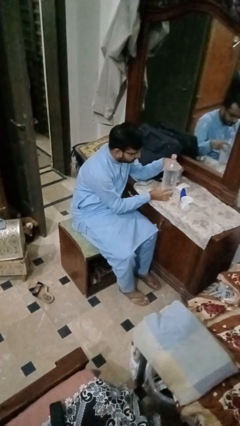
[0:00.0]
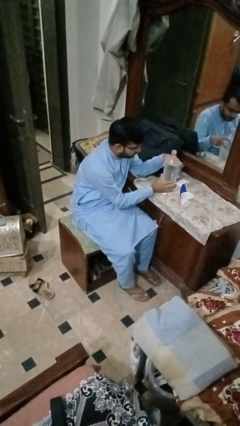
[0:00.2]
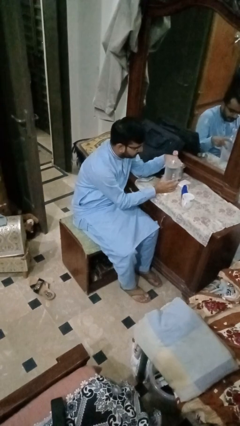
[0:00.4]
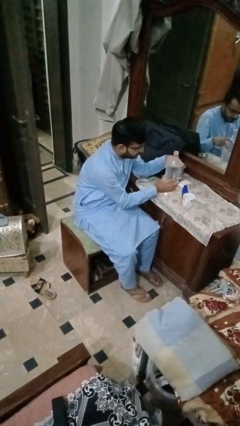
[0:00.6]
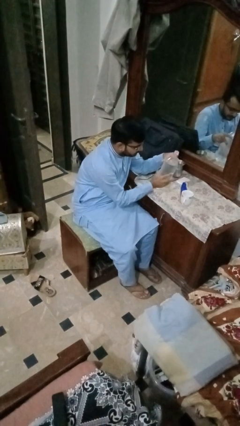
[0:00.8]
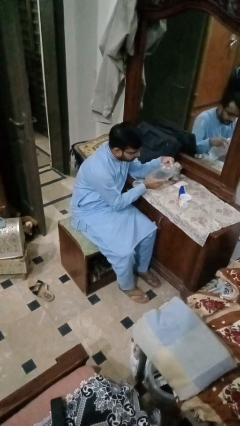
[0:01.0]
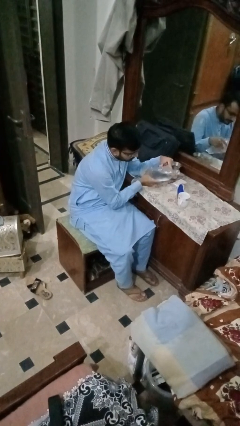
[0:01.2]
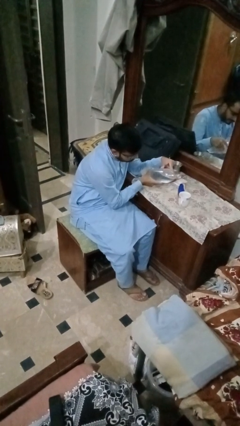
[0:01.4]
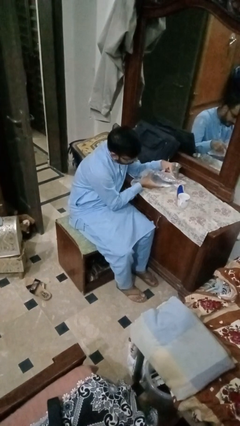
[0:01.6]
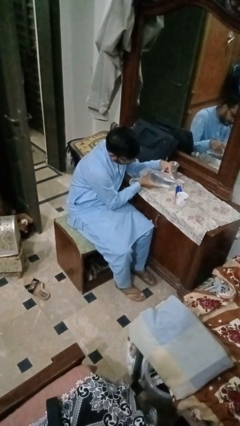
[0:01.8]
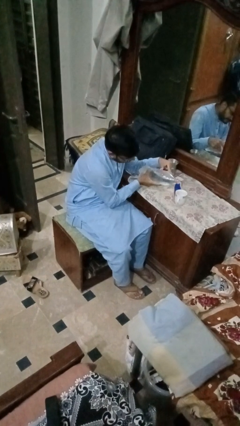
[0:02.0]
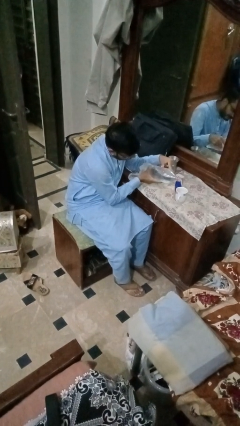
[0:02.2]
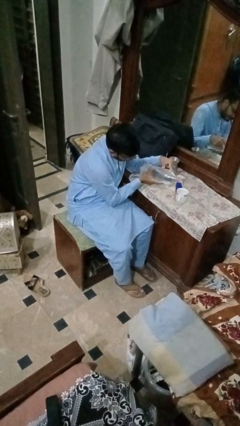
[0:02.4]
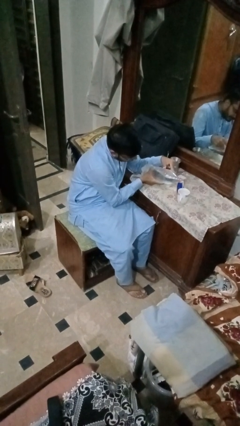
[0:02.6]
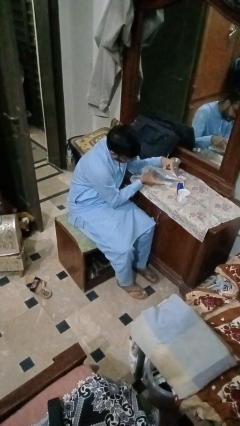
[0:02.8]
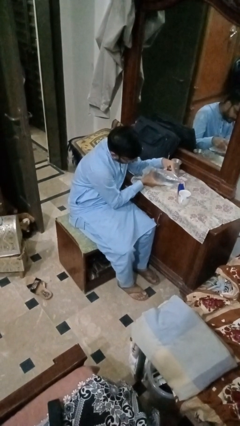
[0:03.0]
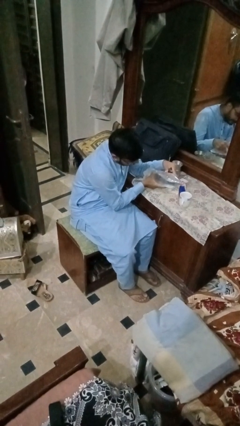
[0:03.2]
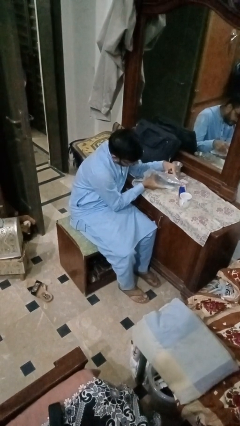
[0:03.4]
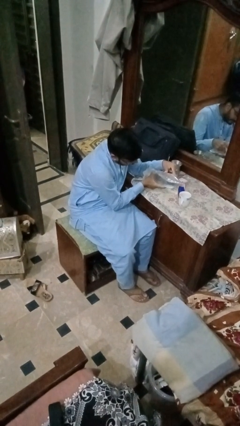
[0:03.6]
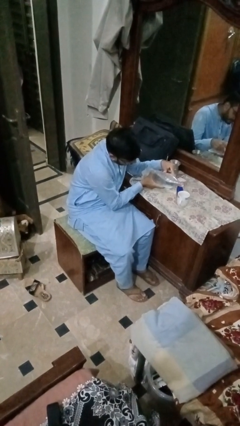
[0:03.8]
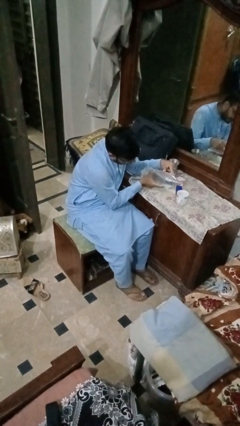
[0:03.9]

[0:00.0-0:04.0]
person pours liquid into cup

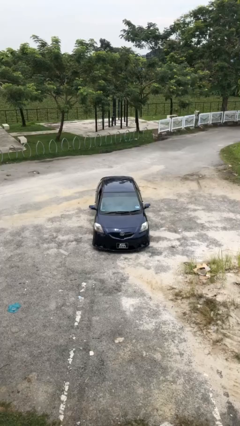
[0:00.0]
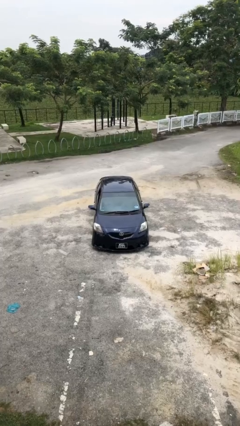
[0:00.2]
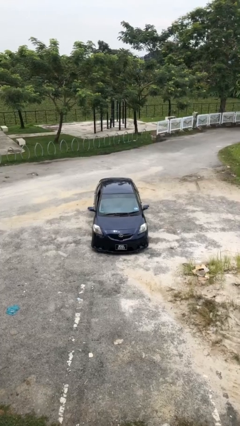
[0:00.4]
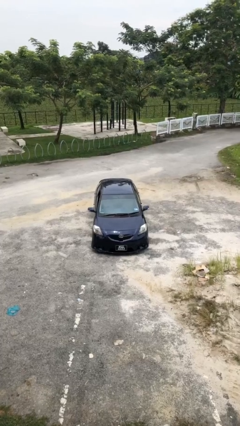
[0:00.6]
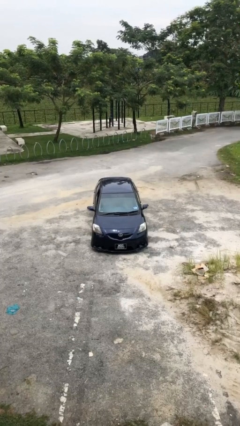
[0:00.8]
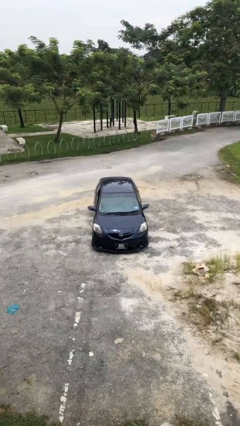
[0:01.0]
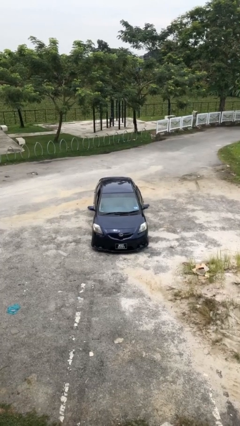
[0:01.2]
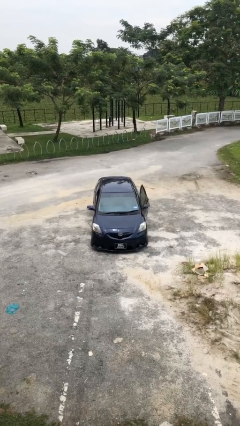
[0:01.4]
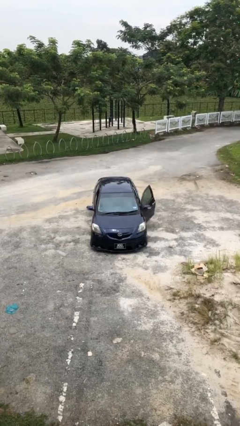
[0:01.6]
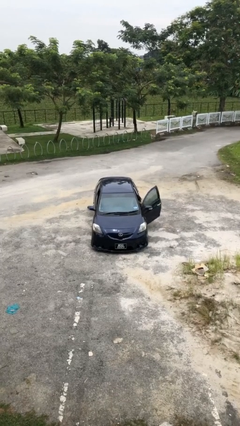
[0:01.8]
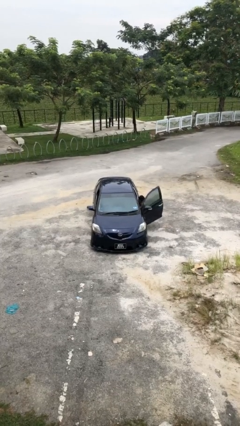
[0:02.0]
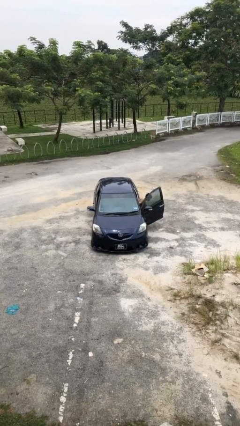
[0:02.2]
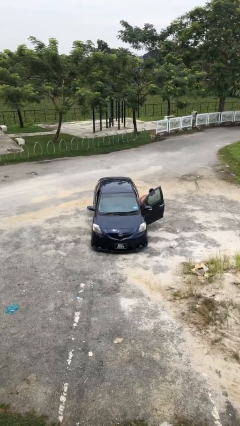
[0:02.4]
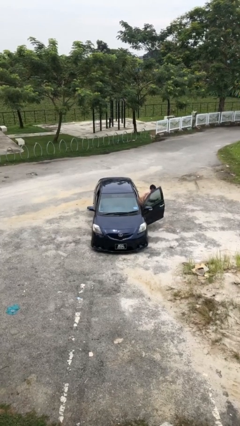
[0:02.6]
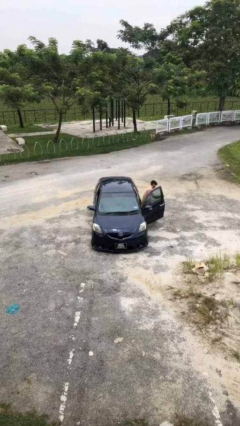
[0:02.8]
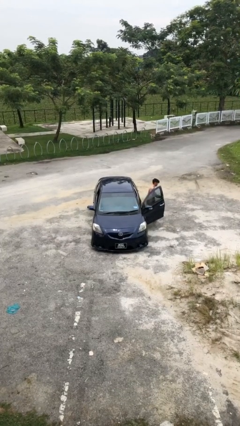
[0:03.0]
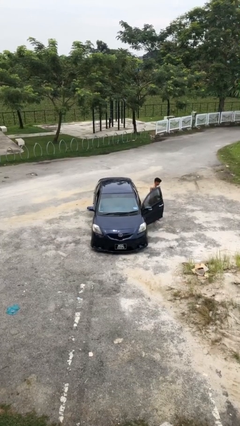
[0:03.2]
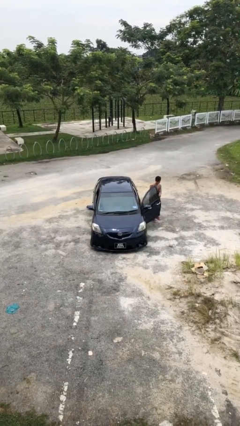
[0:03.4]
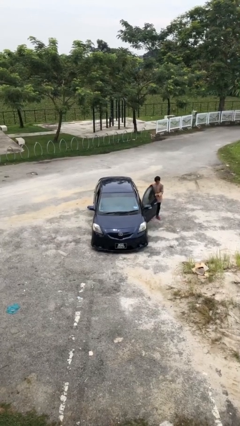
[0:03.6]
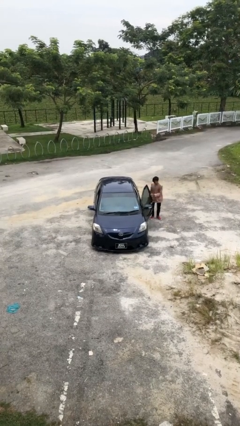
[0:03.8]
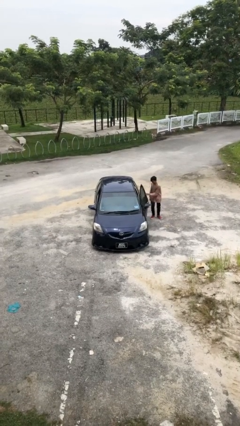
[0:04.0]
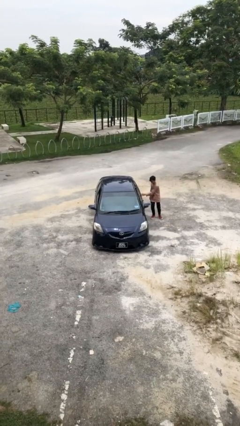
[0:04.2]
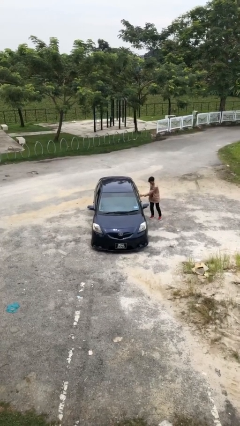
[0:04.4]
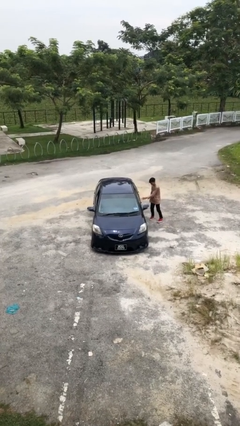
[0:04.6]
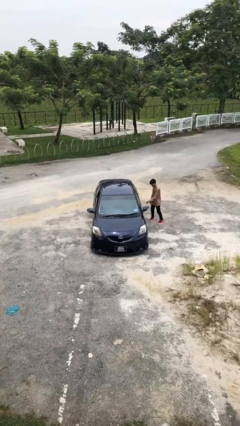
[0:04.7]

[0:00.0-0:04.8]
car drops off person

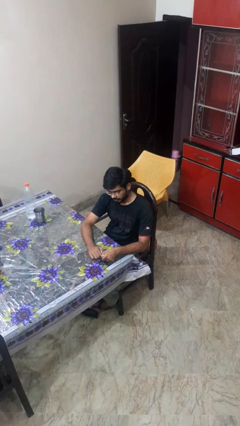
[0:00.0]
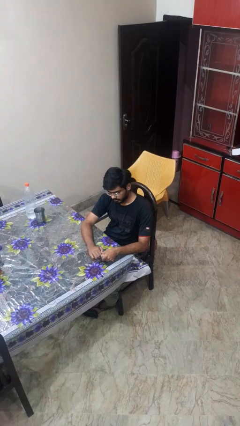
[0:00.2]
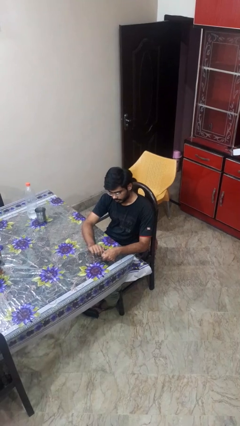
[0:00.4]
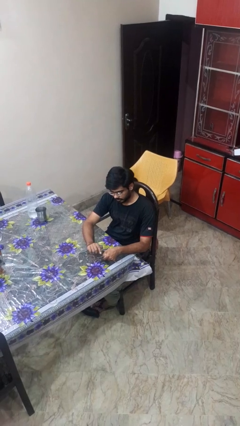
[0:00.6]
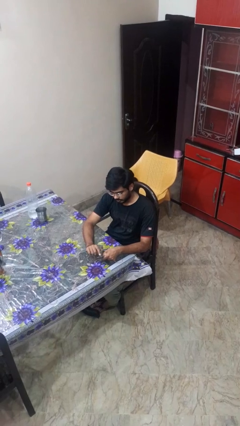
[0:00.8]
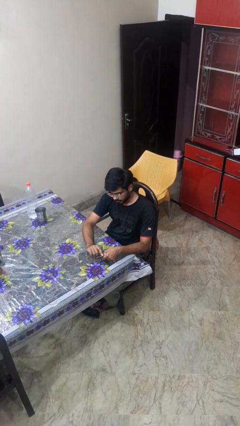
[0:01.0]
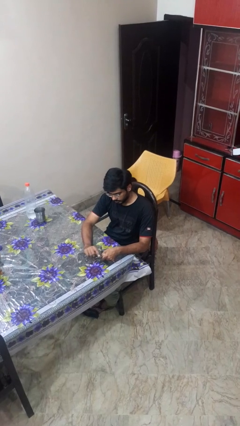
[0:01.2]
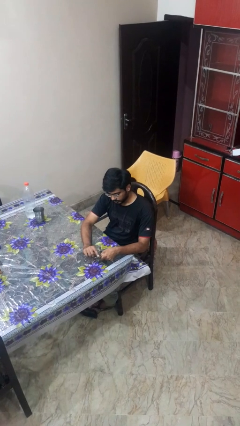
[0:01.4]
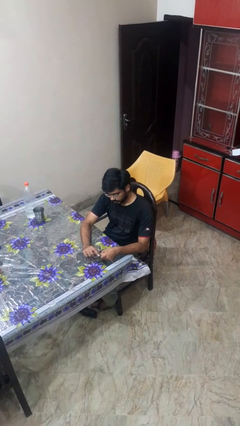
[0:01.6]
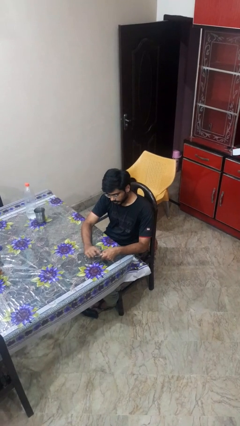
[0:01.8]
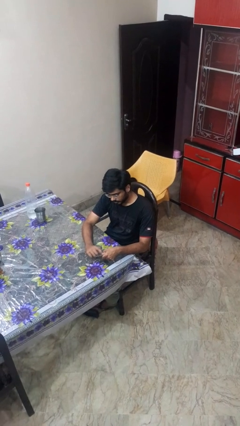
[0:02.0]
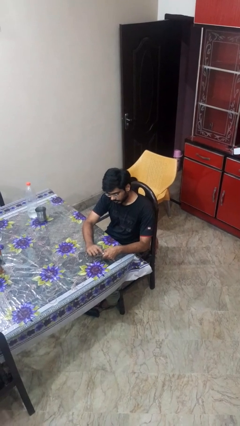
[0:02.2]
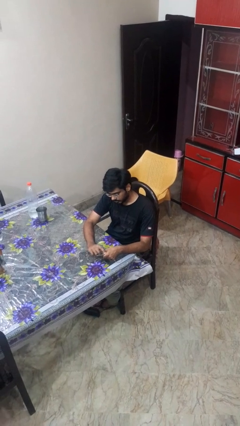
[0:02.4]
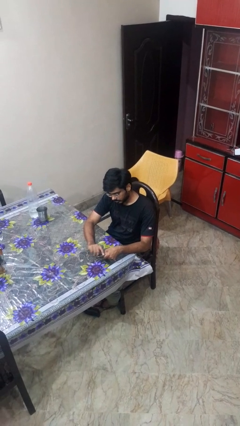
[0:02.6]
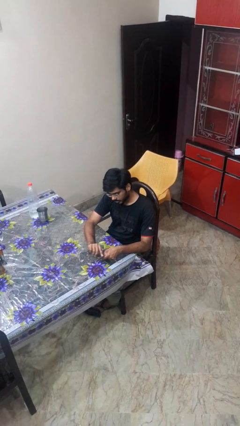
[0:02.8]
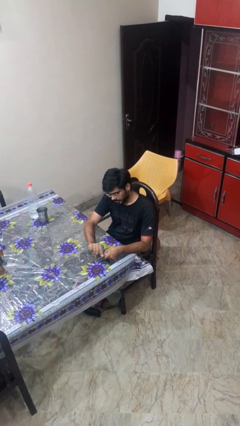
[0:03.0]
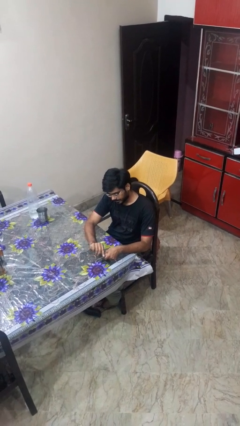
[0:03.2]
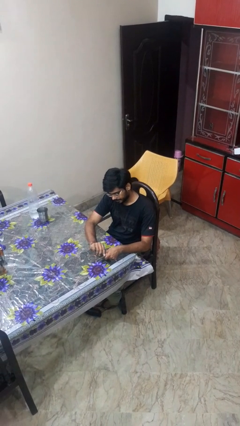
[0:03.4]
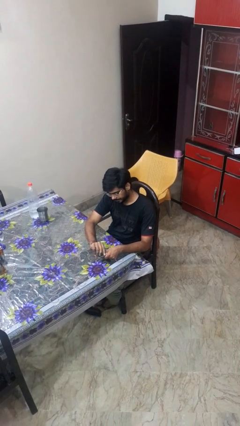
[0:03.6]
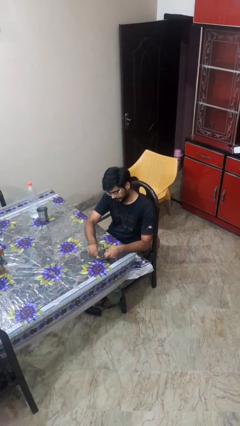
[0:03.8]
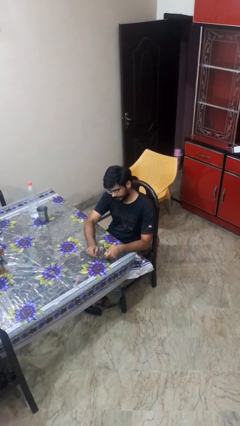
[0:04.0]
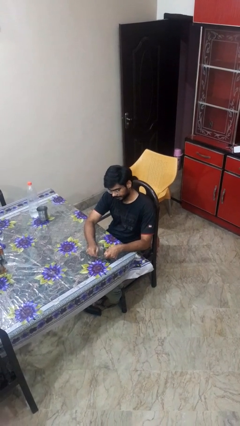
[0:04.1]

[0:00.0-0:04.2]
person files fingernails

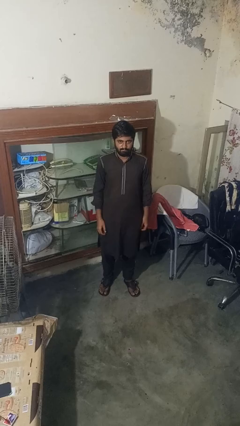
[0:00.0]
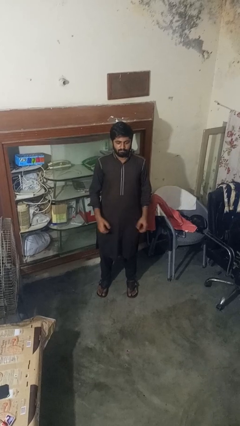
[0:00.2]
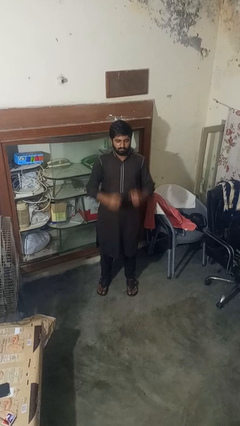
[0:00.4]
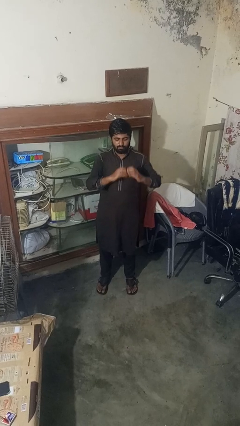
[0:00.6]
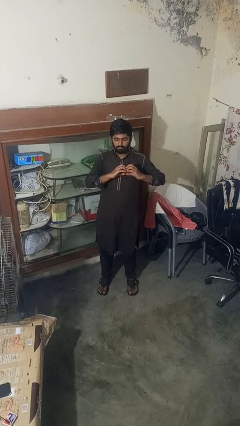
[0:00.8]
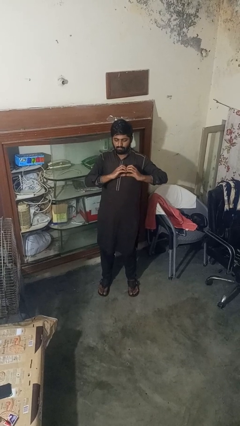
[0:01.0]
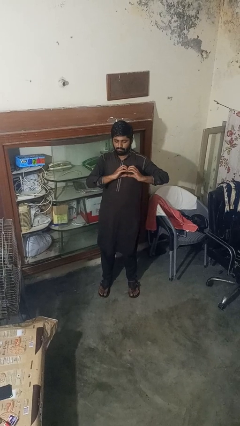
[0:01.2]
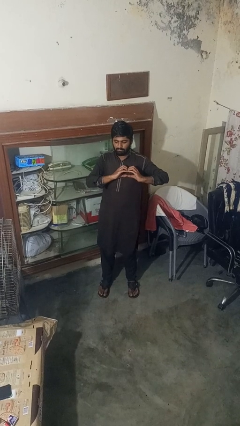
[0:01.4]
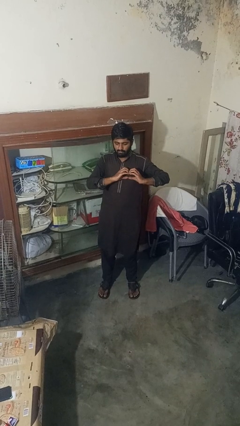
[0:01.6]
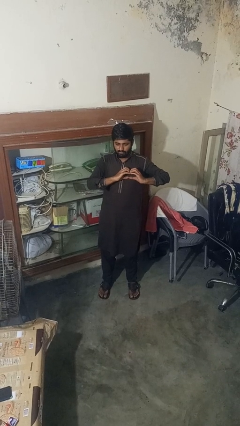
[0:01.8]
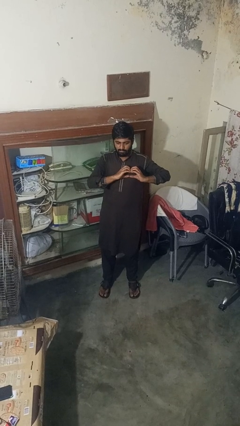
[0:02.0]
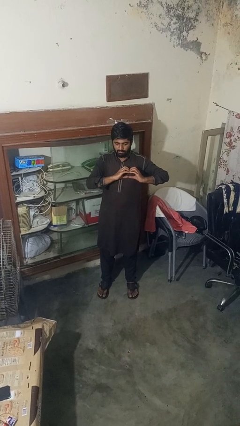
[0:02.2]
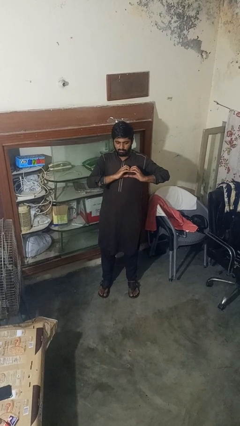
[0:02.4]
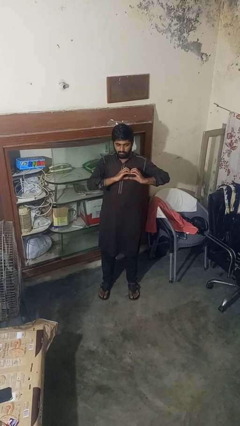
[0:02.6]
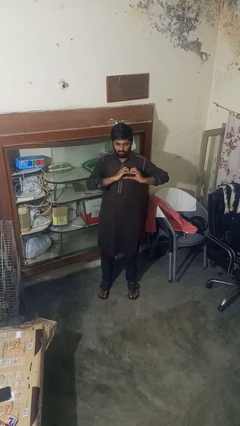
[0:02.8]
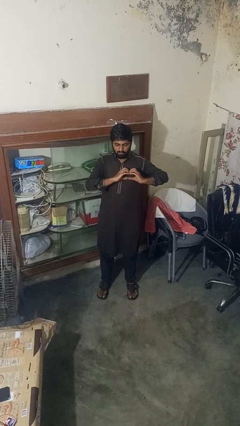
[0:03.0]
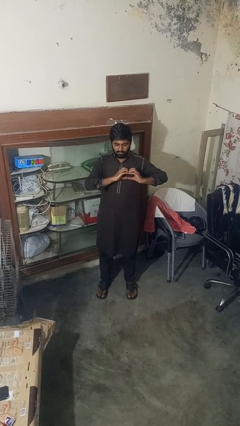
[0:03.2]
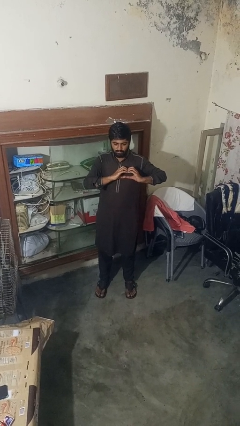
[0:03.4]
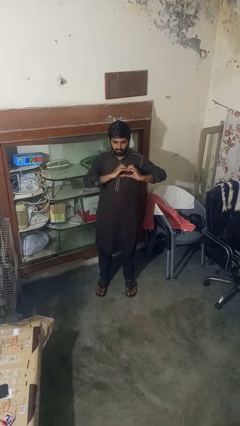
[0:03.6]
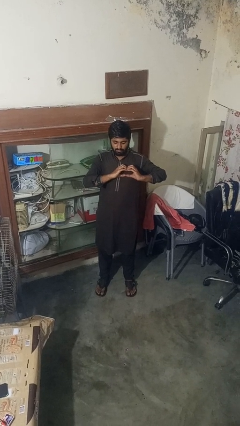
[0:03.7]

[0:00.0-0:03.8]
person gestures heart

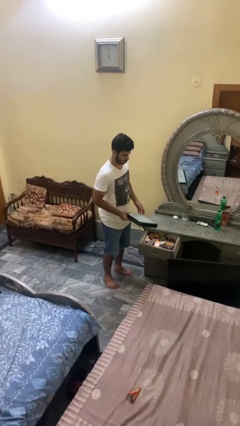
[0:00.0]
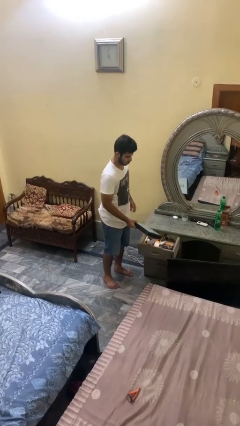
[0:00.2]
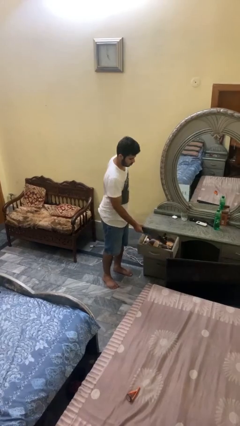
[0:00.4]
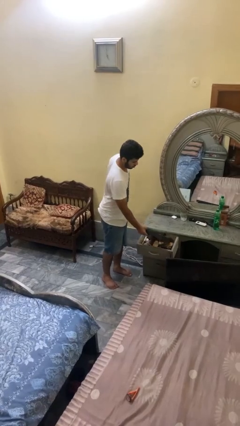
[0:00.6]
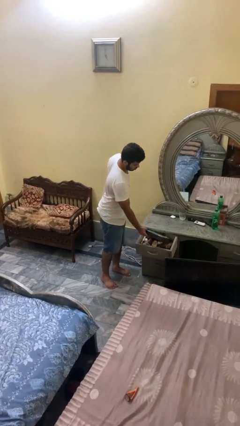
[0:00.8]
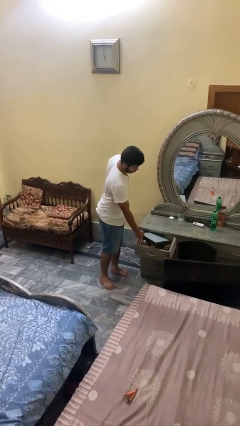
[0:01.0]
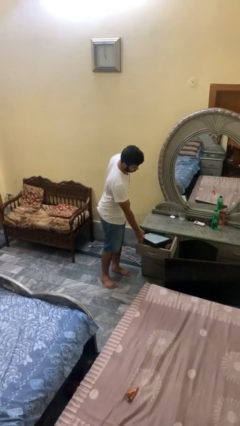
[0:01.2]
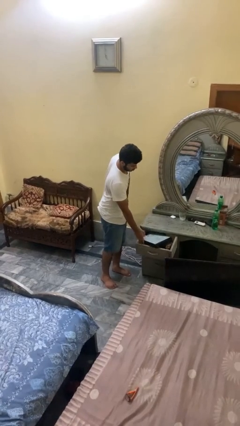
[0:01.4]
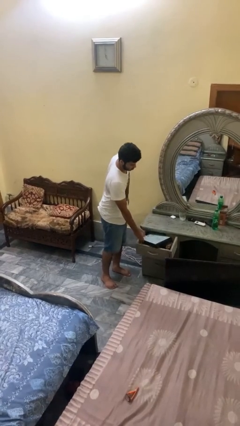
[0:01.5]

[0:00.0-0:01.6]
person puts down object into cabinet
